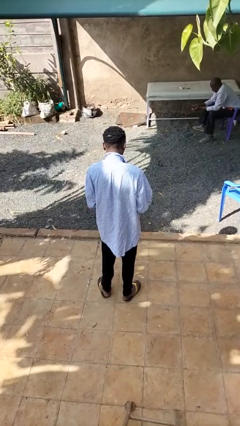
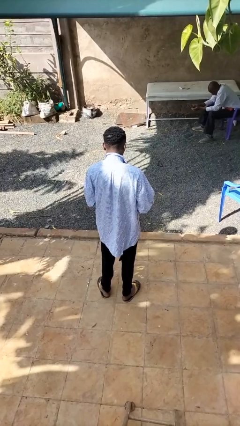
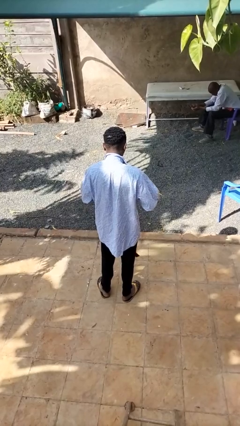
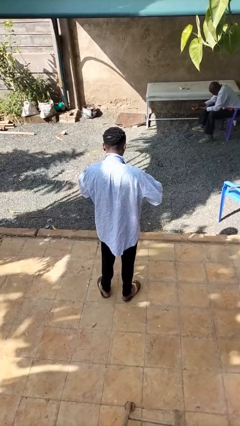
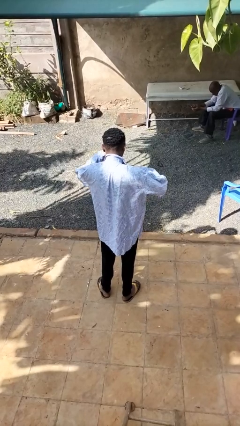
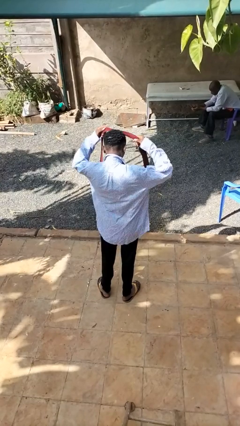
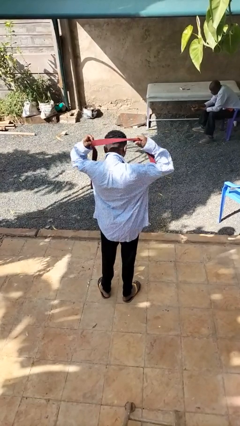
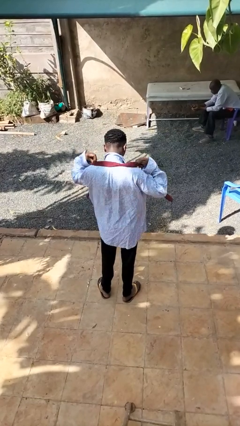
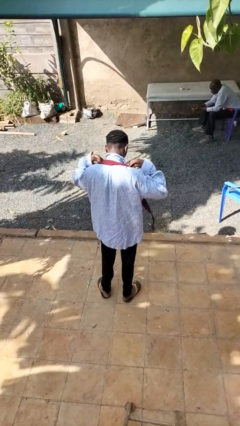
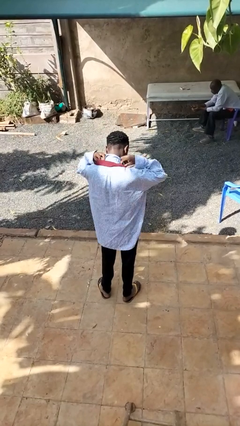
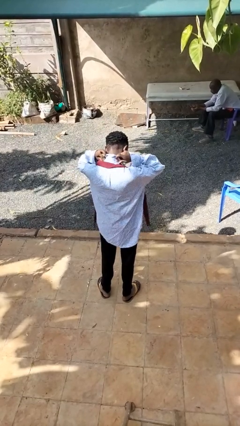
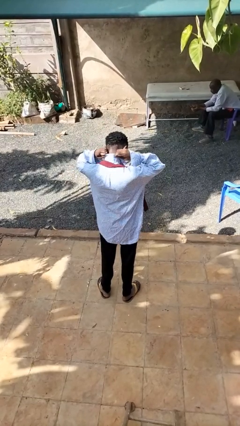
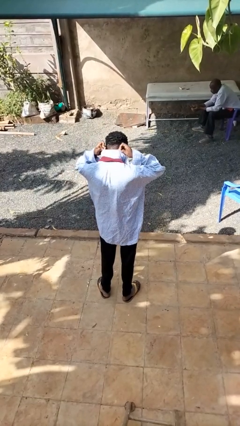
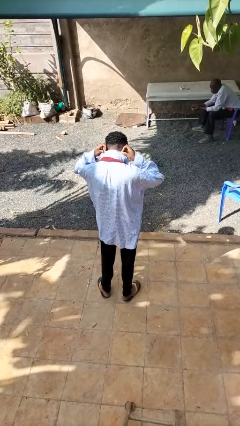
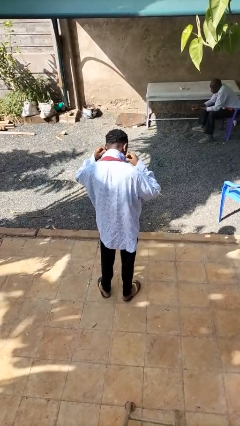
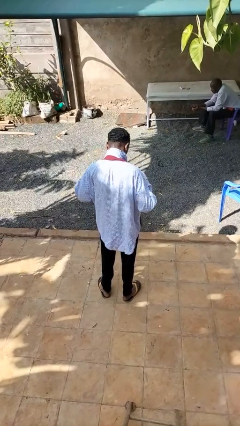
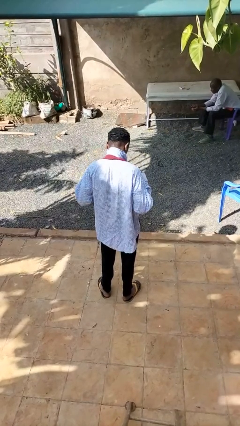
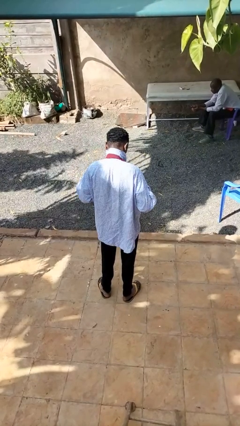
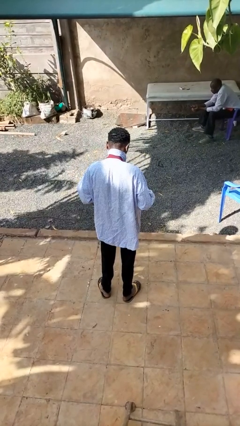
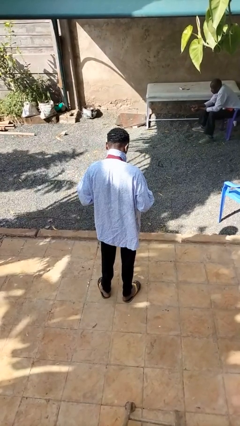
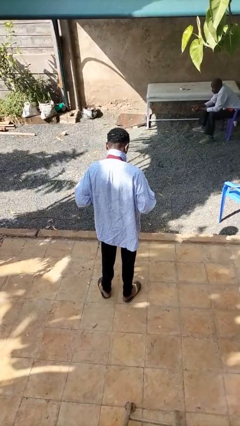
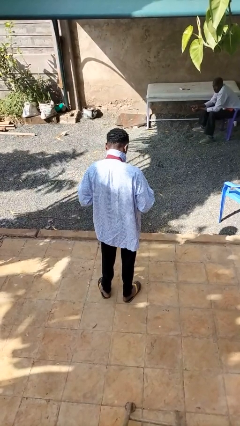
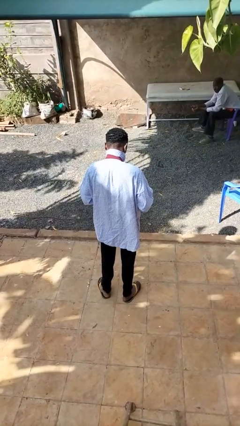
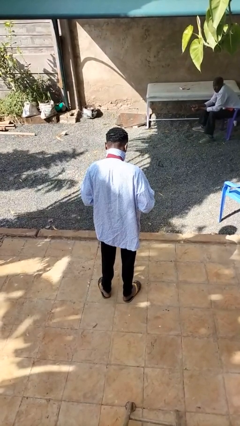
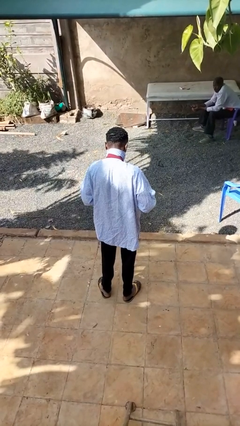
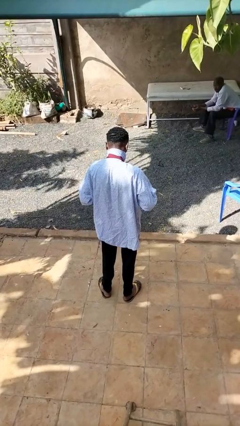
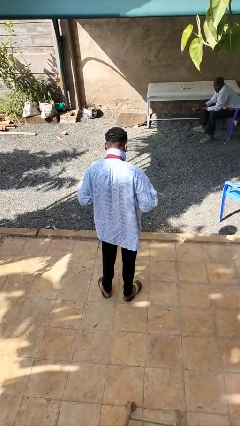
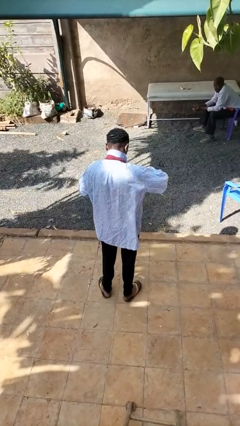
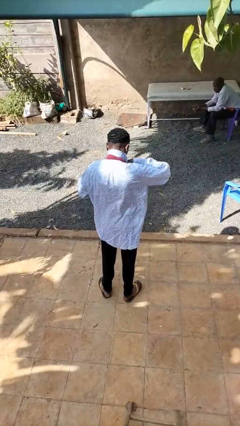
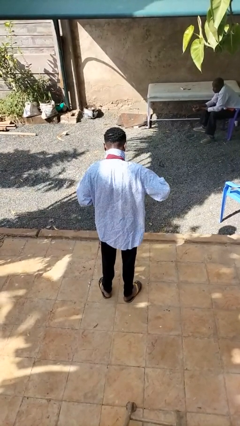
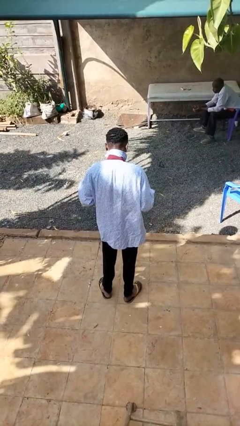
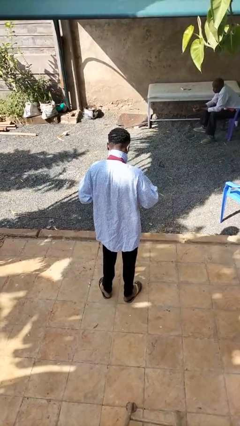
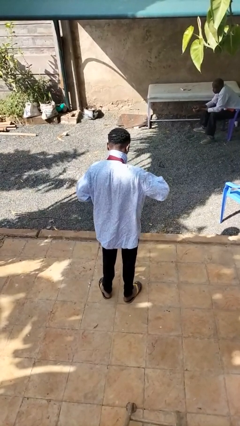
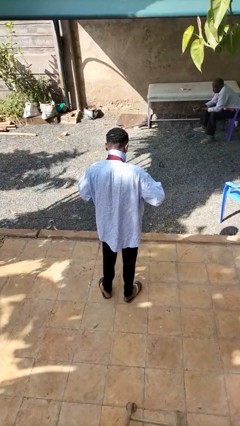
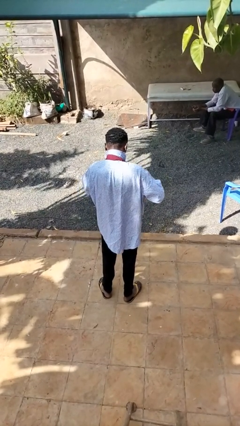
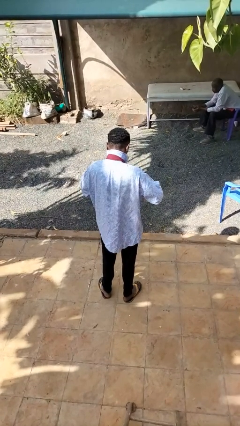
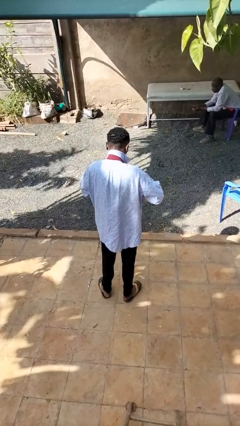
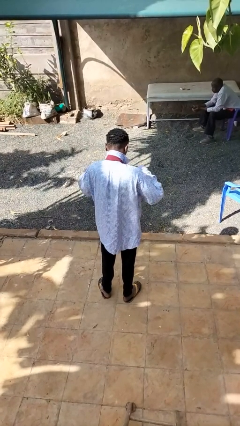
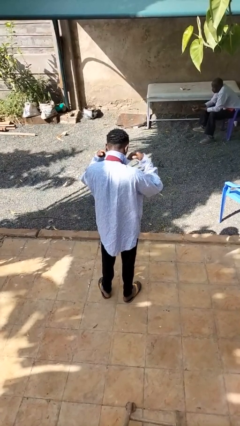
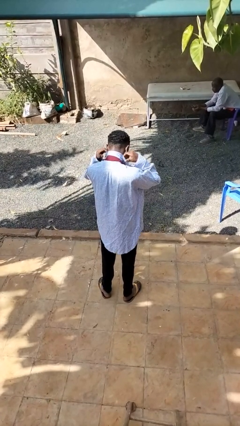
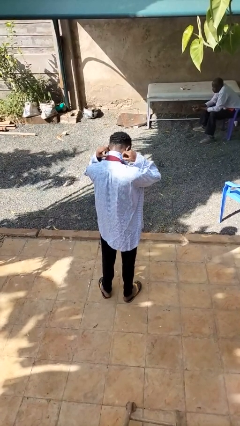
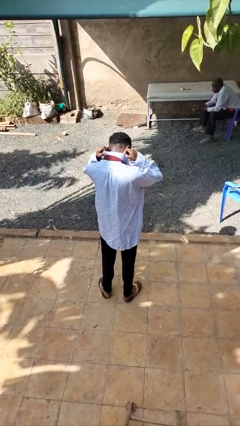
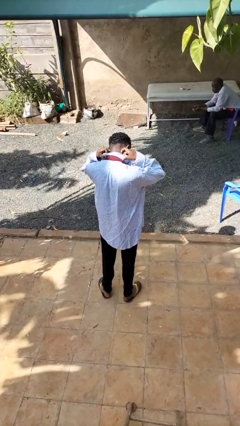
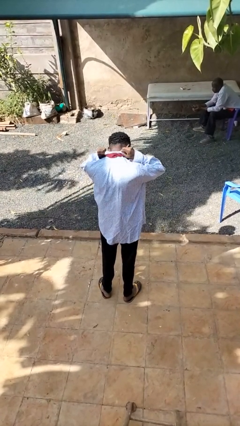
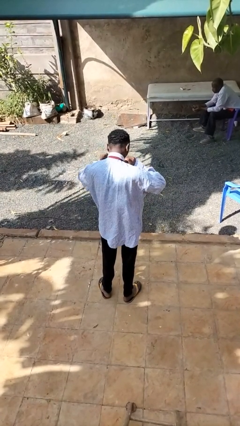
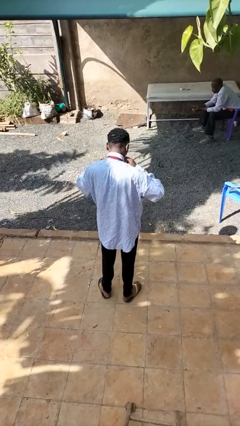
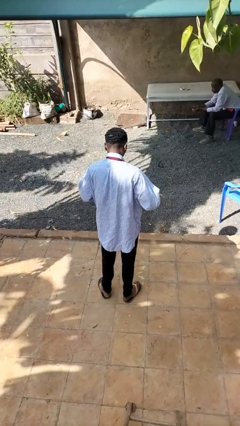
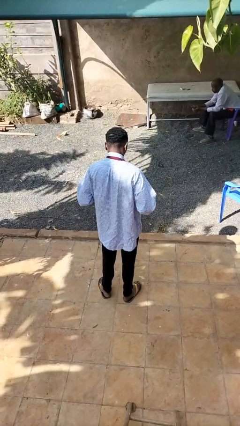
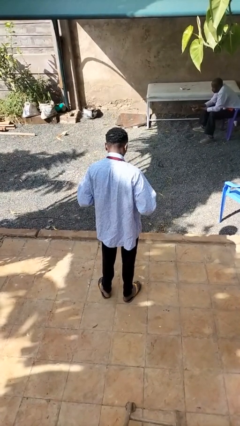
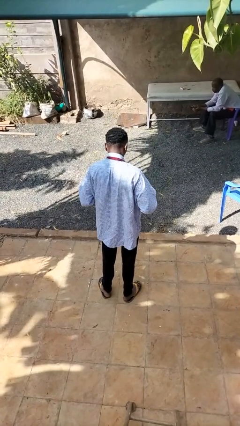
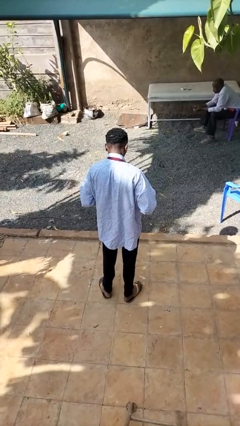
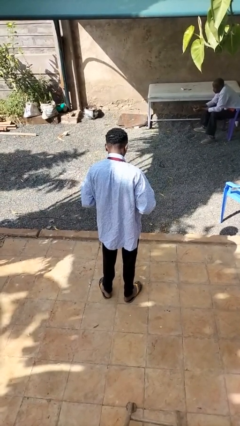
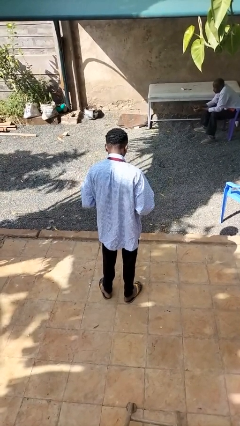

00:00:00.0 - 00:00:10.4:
person puts on necktie

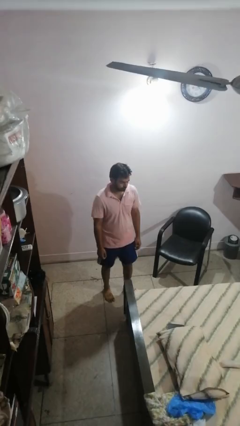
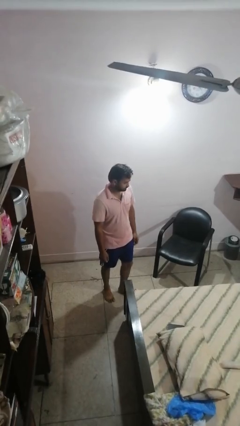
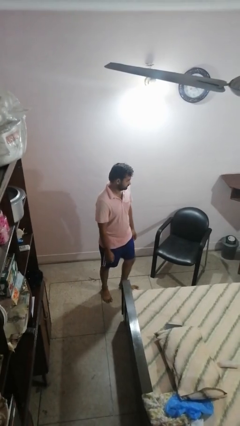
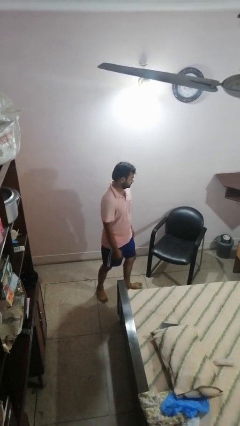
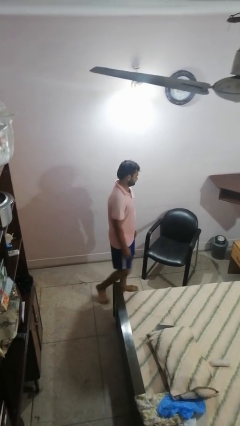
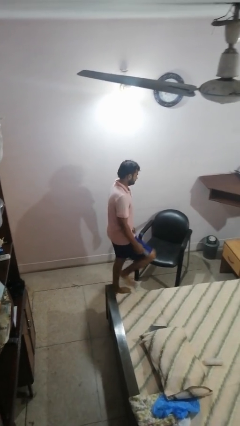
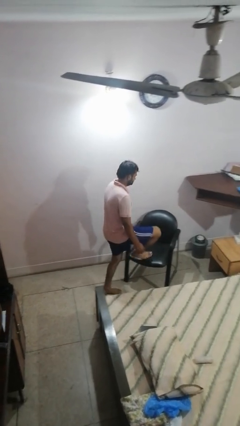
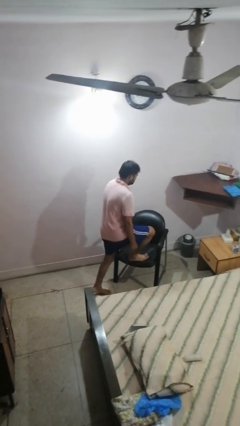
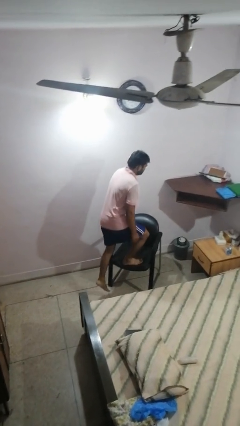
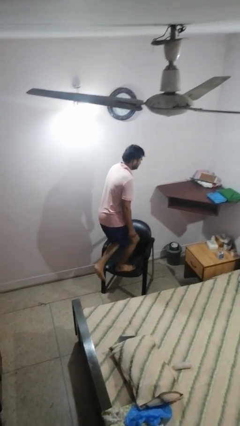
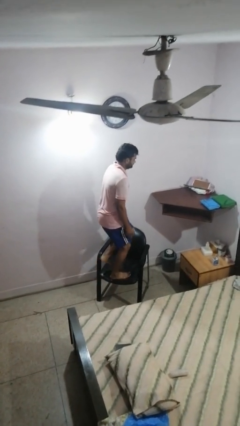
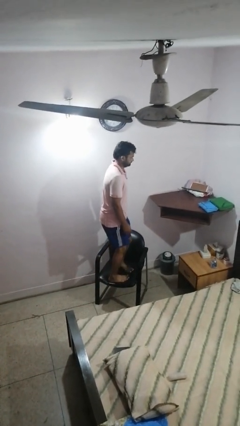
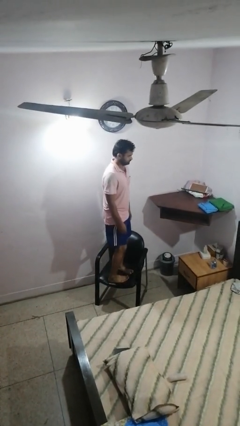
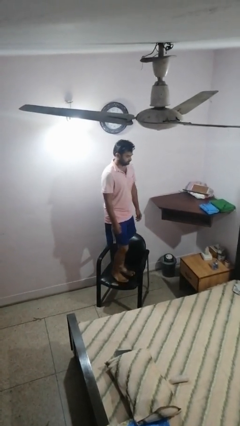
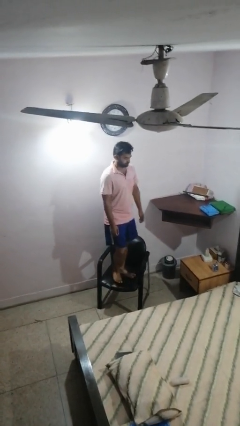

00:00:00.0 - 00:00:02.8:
person climbs on chair

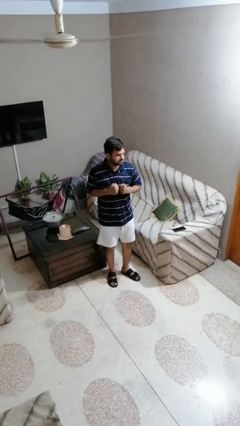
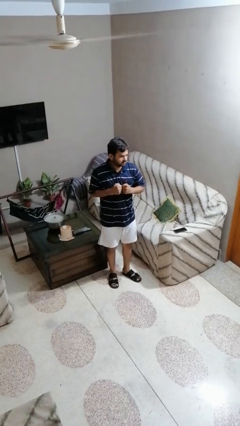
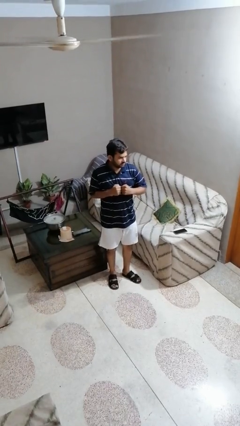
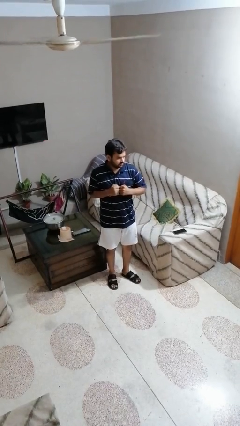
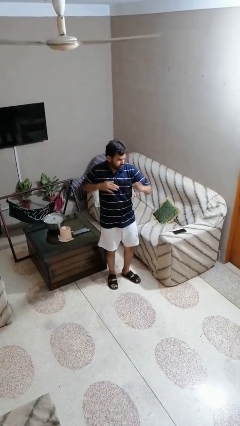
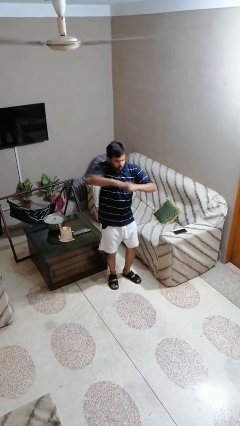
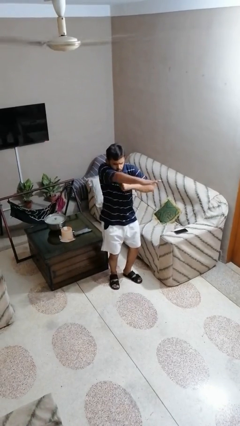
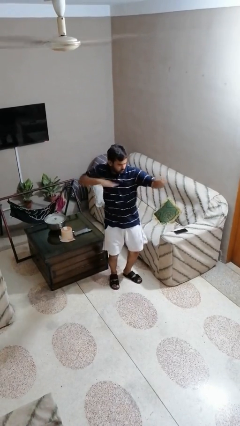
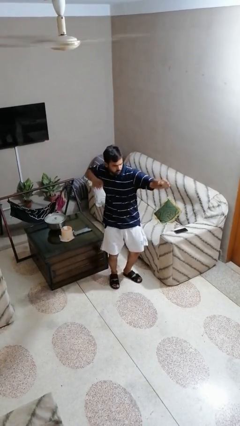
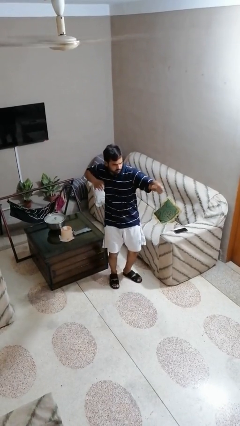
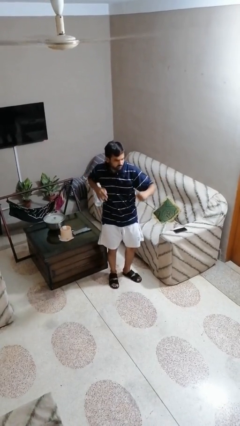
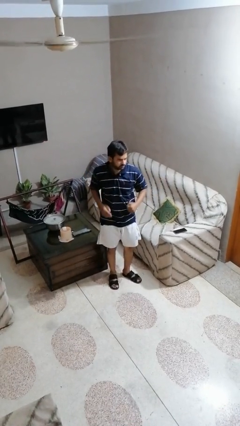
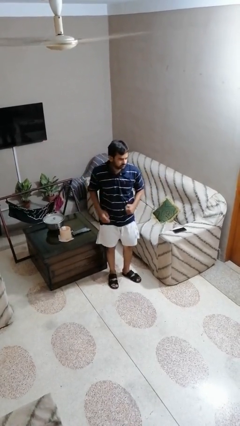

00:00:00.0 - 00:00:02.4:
person karate chop

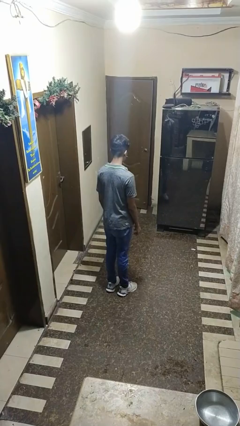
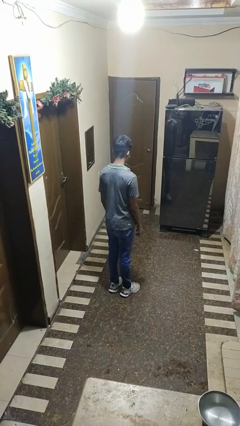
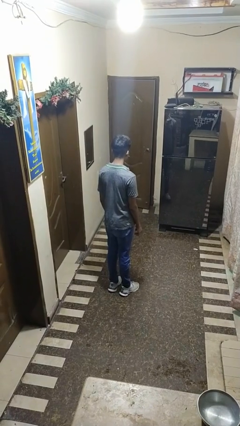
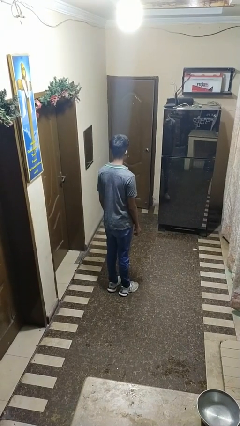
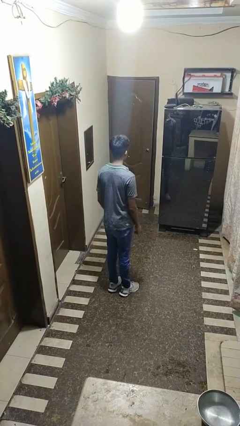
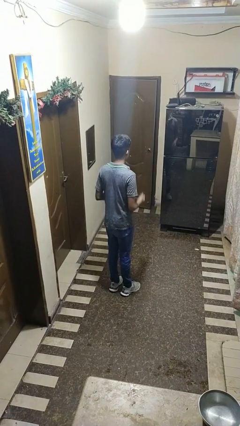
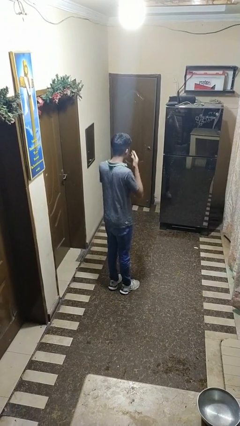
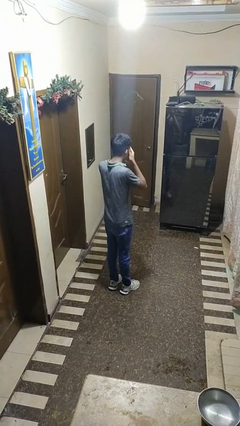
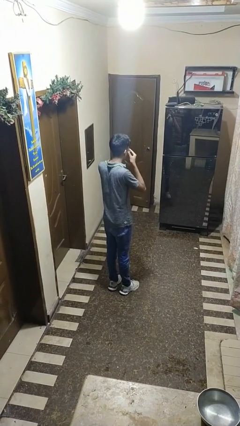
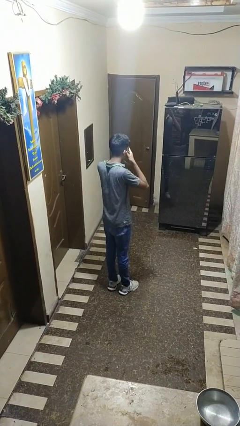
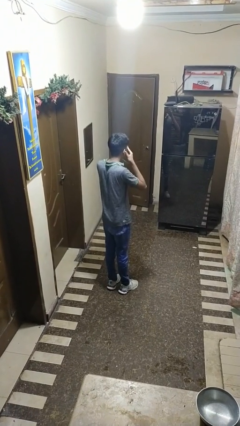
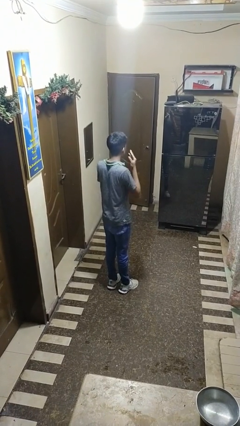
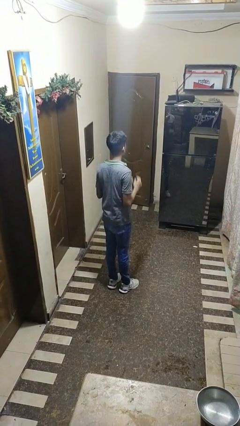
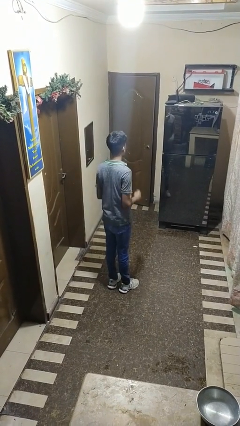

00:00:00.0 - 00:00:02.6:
person rubs eyes
